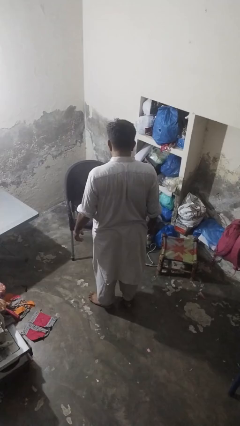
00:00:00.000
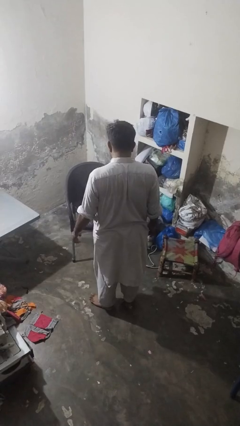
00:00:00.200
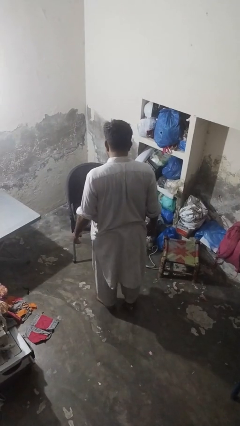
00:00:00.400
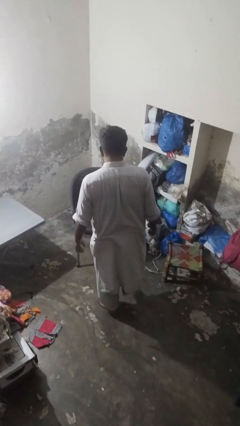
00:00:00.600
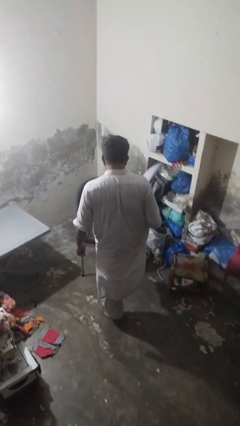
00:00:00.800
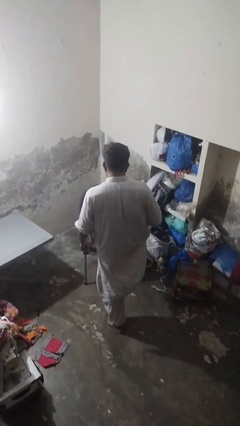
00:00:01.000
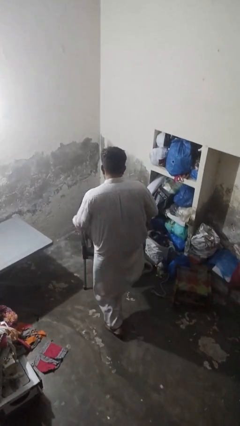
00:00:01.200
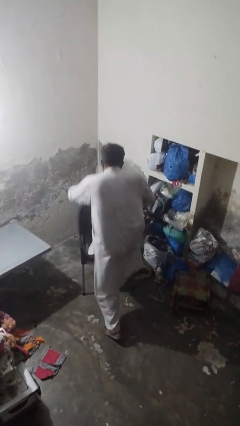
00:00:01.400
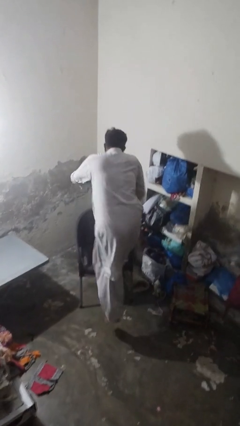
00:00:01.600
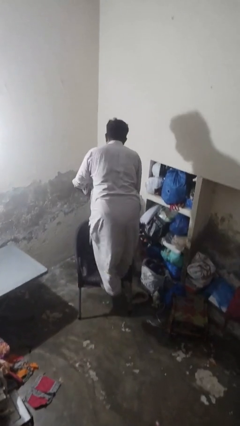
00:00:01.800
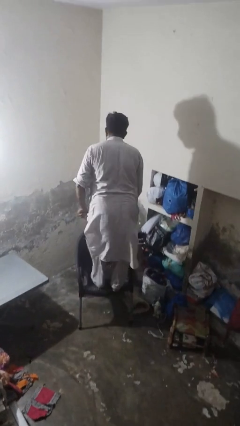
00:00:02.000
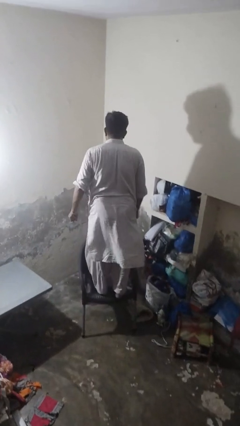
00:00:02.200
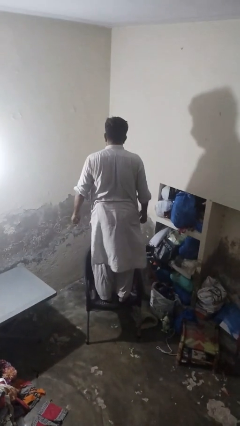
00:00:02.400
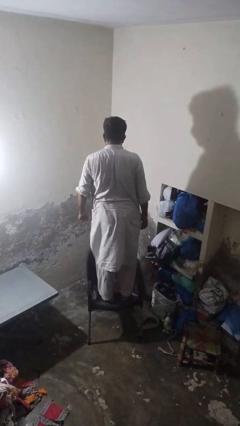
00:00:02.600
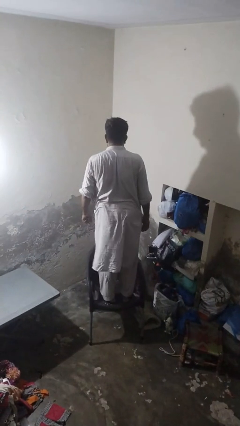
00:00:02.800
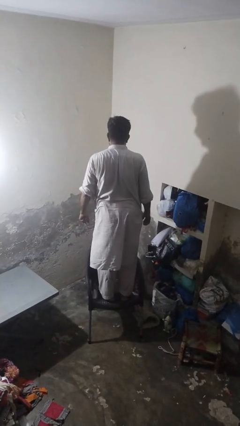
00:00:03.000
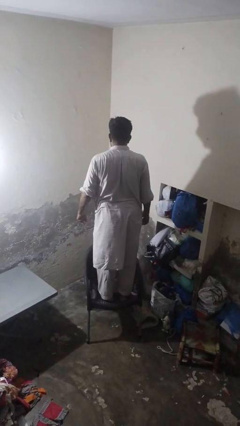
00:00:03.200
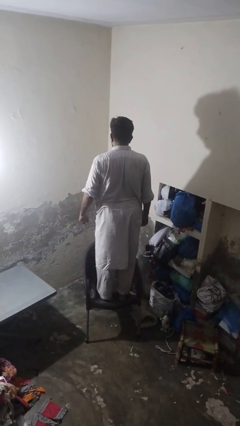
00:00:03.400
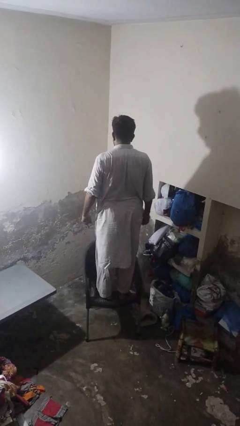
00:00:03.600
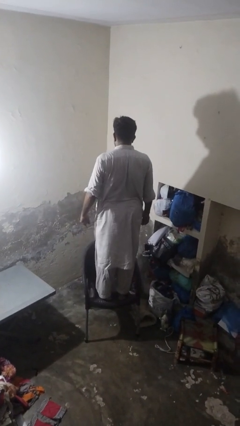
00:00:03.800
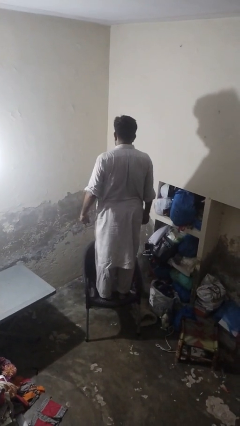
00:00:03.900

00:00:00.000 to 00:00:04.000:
person climbs on chair

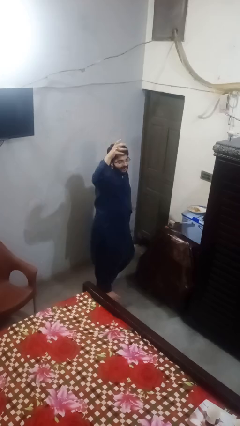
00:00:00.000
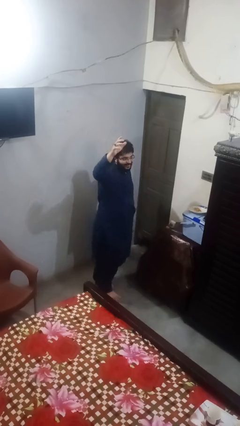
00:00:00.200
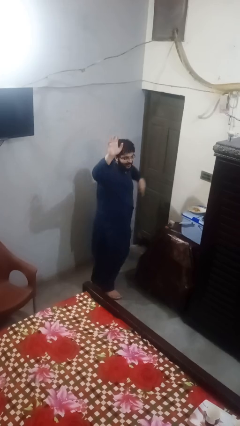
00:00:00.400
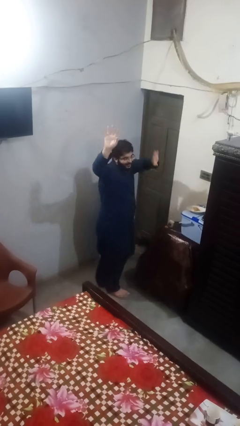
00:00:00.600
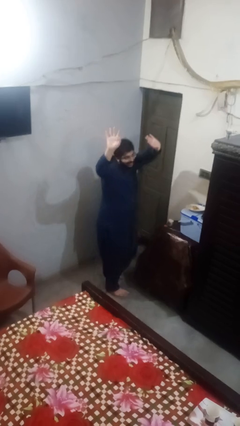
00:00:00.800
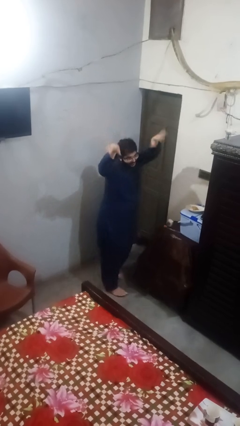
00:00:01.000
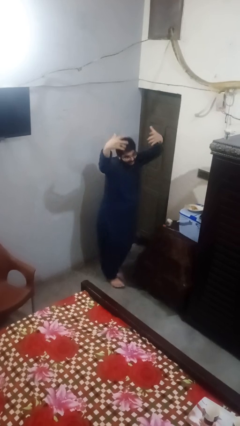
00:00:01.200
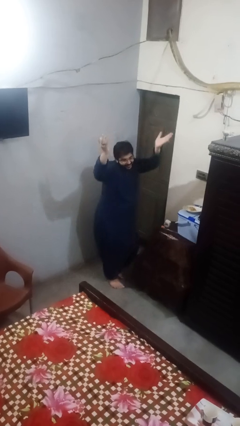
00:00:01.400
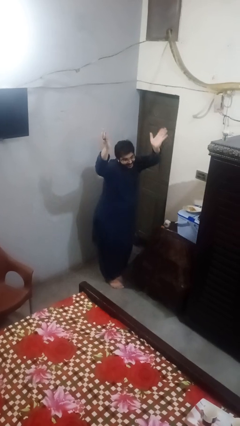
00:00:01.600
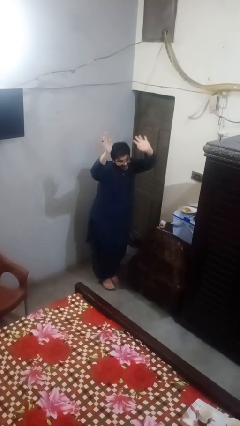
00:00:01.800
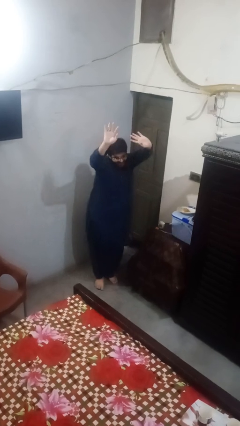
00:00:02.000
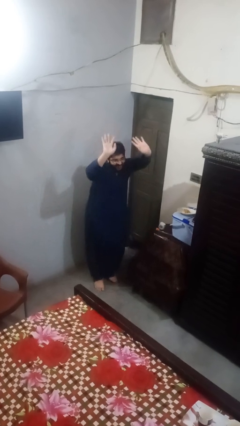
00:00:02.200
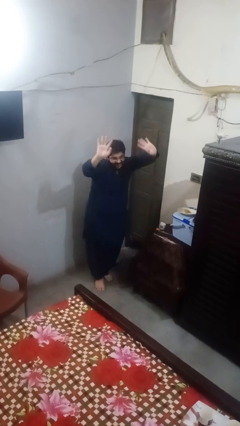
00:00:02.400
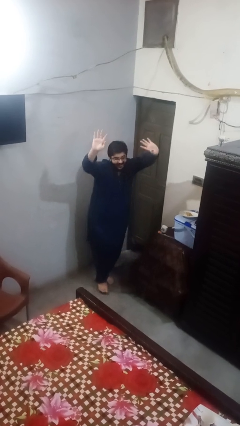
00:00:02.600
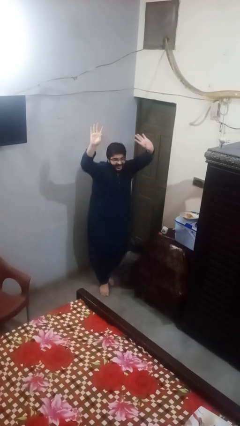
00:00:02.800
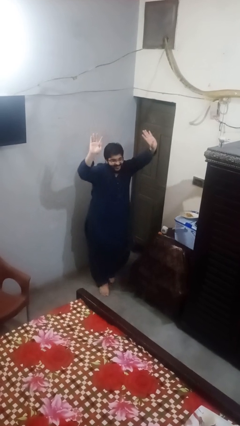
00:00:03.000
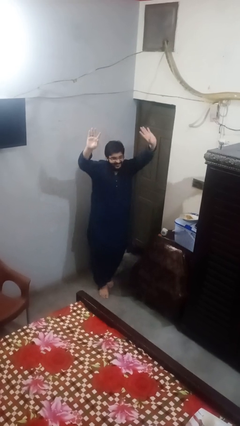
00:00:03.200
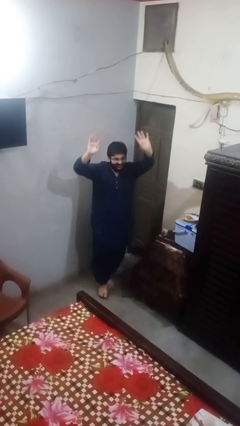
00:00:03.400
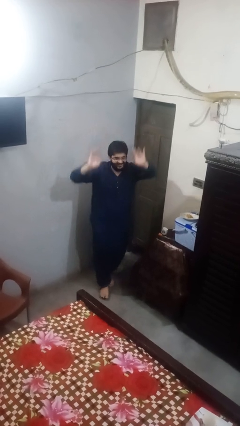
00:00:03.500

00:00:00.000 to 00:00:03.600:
person dances in place

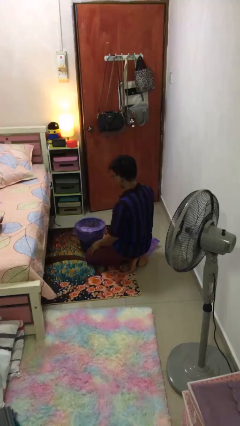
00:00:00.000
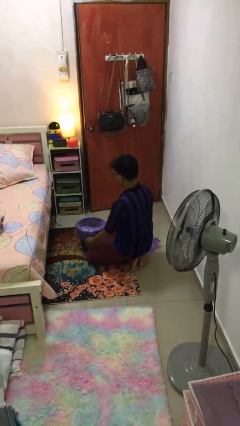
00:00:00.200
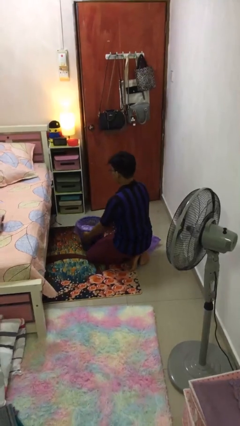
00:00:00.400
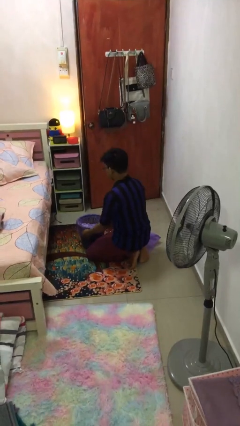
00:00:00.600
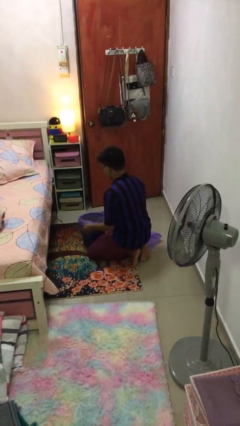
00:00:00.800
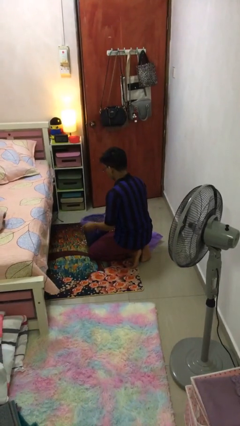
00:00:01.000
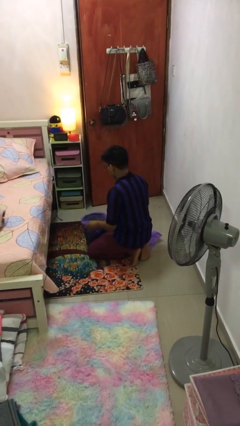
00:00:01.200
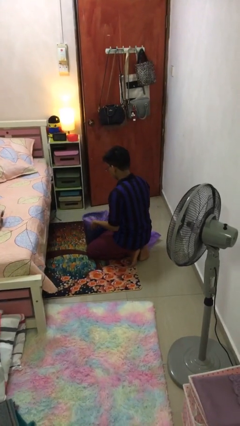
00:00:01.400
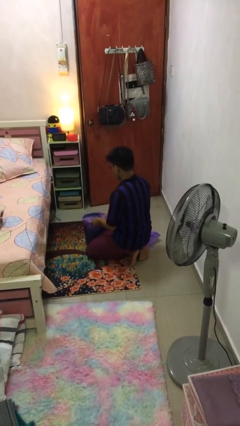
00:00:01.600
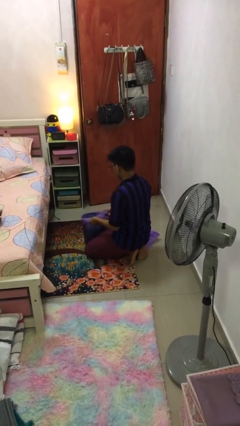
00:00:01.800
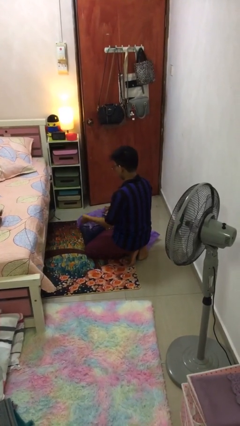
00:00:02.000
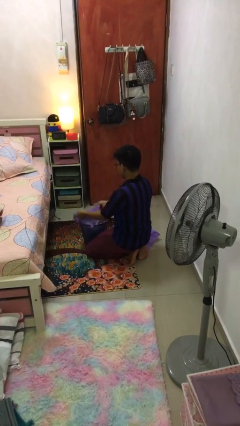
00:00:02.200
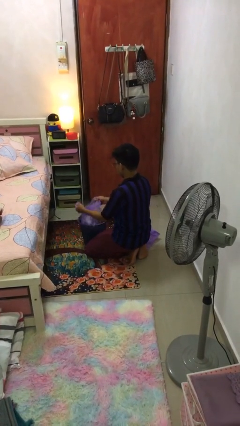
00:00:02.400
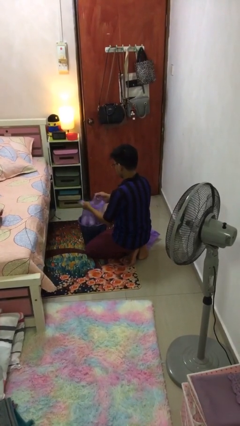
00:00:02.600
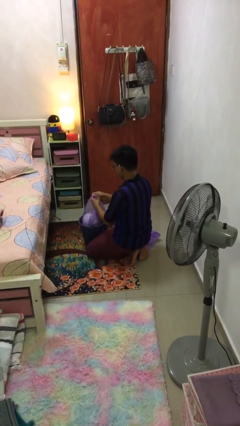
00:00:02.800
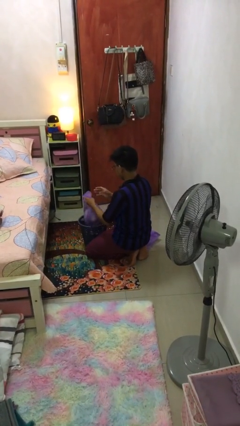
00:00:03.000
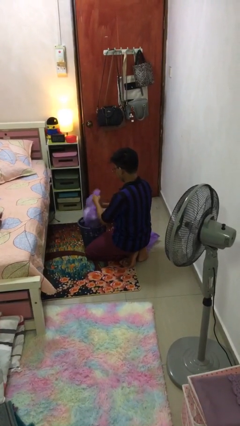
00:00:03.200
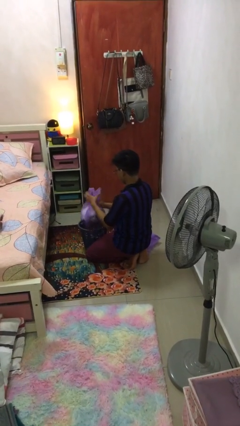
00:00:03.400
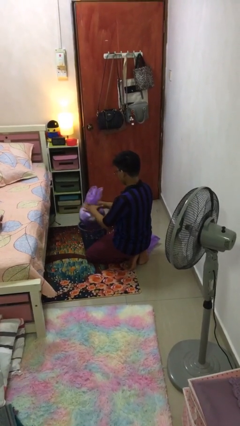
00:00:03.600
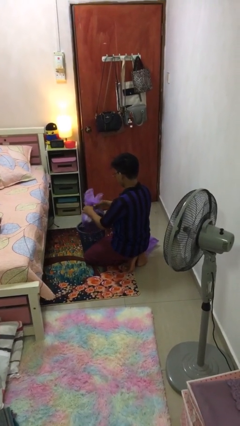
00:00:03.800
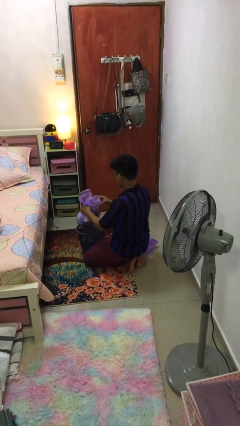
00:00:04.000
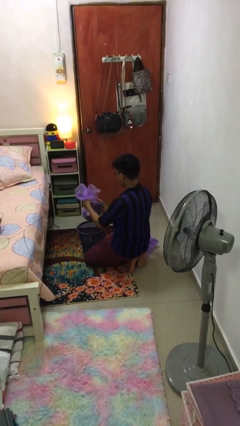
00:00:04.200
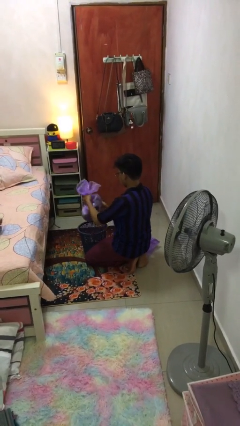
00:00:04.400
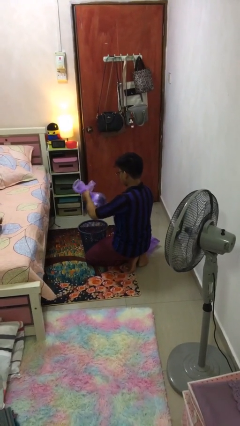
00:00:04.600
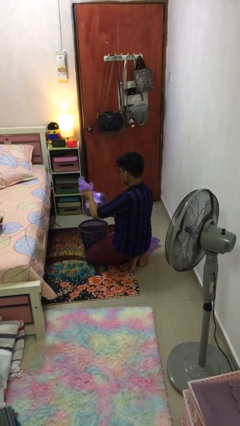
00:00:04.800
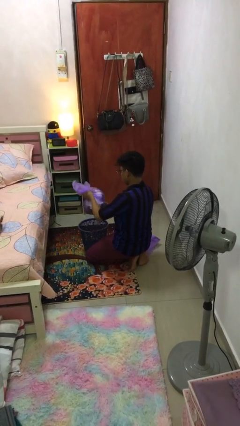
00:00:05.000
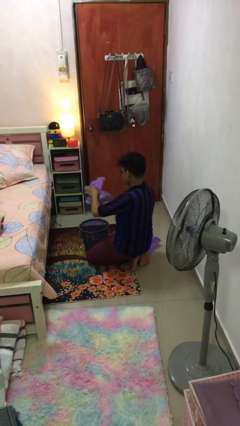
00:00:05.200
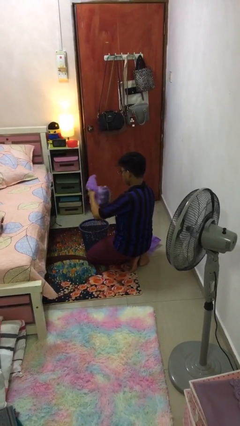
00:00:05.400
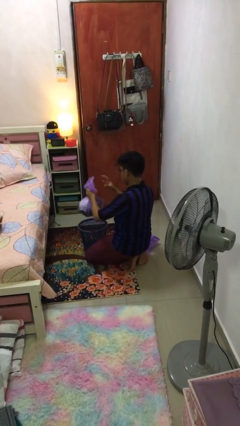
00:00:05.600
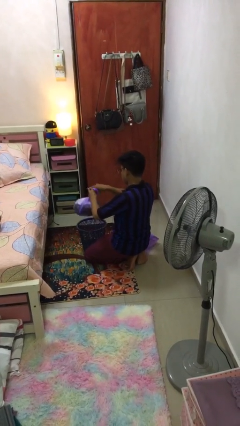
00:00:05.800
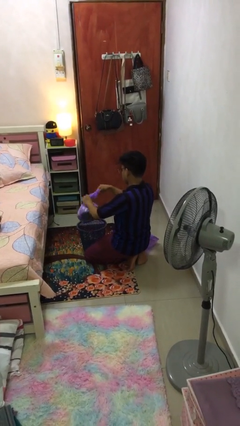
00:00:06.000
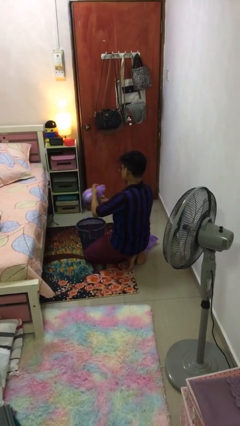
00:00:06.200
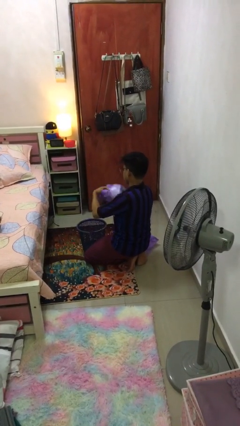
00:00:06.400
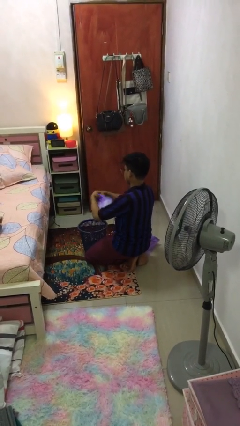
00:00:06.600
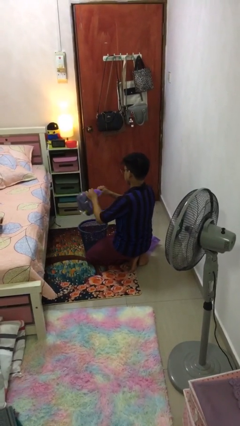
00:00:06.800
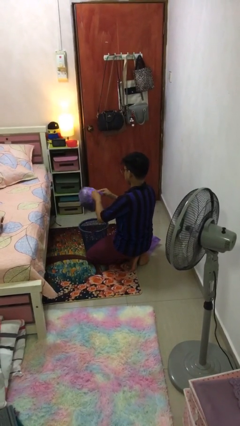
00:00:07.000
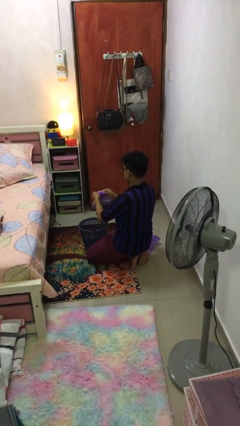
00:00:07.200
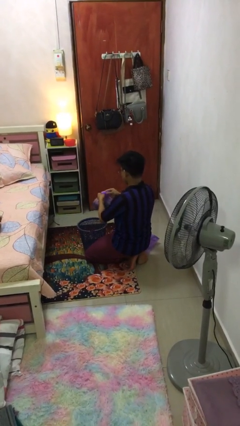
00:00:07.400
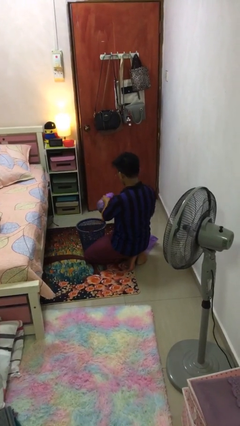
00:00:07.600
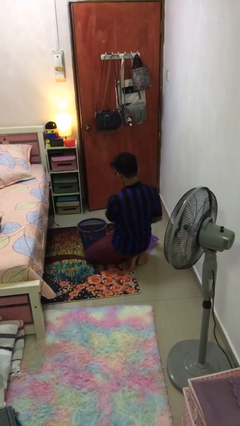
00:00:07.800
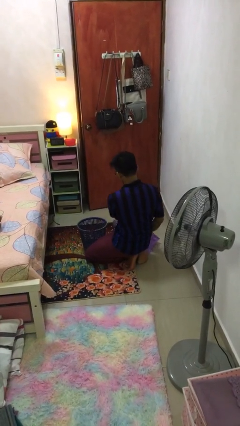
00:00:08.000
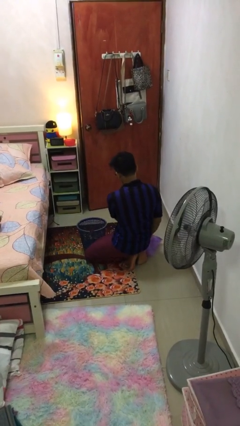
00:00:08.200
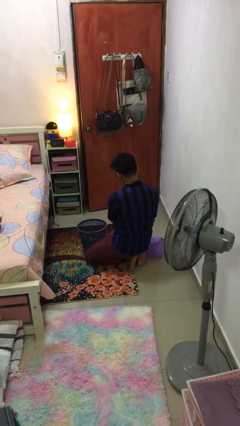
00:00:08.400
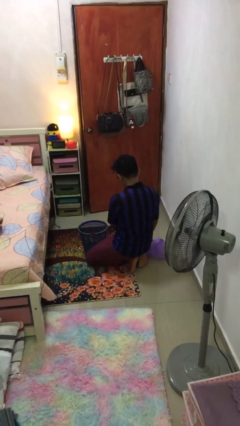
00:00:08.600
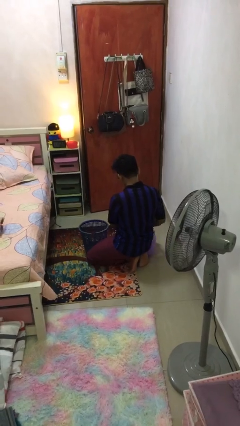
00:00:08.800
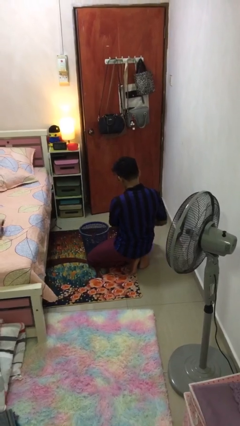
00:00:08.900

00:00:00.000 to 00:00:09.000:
person removes trashbag from trashcan

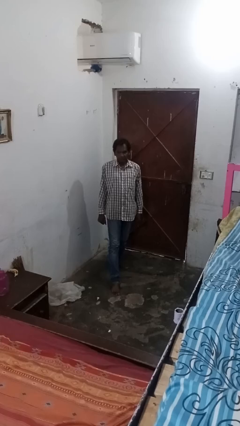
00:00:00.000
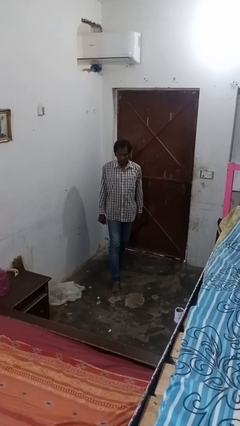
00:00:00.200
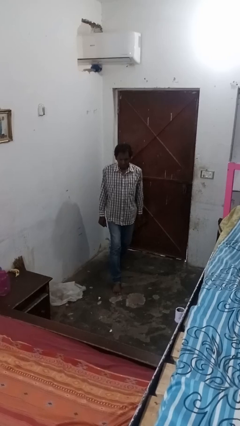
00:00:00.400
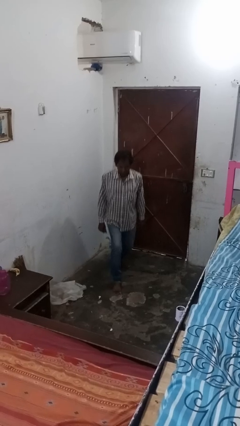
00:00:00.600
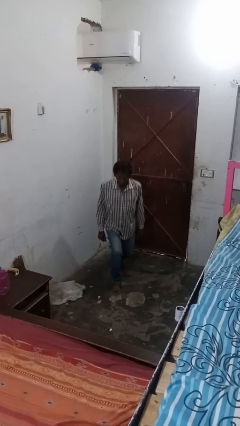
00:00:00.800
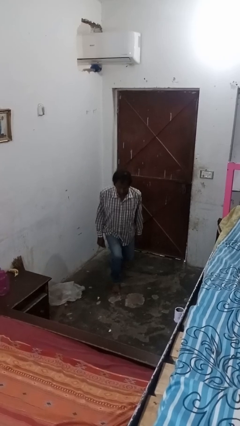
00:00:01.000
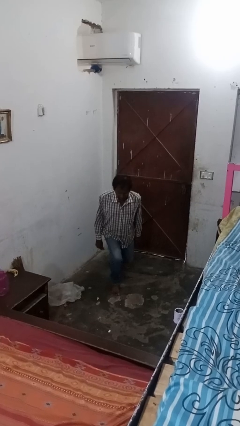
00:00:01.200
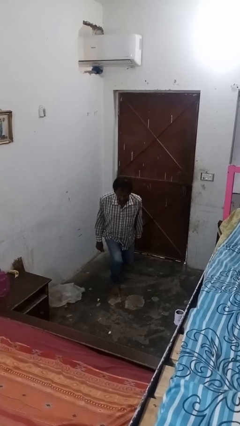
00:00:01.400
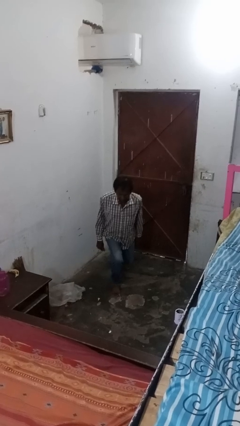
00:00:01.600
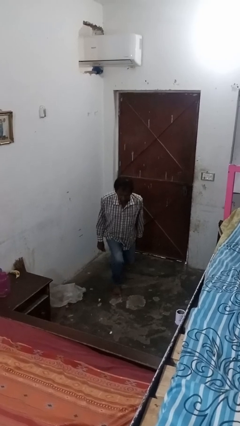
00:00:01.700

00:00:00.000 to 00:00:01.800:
person exercises with lunges
